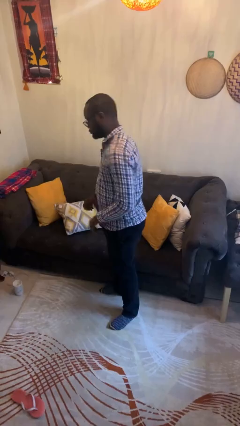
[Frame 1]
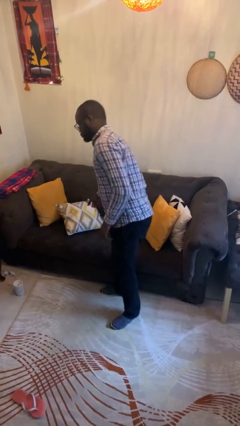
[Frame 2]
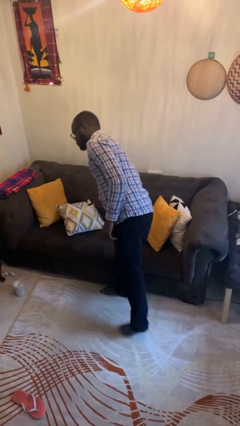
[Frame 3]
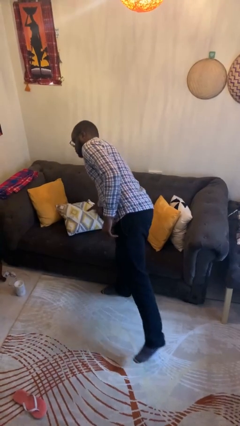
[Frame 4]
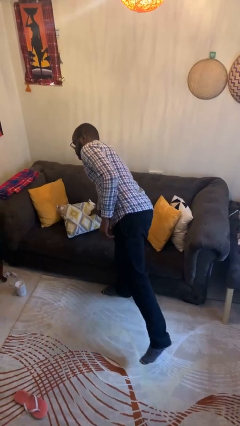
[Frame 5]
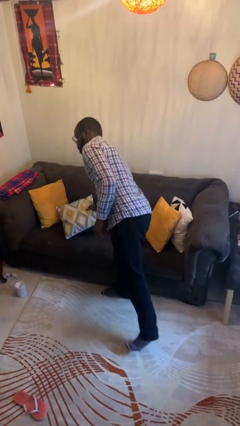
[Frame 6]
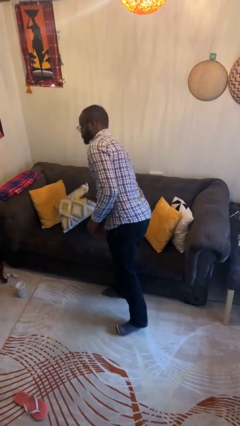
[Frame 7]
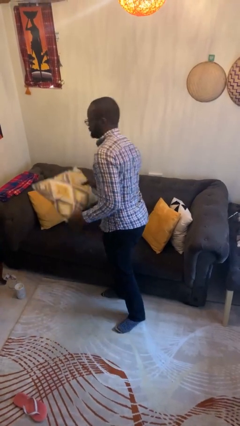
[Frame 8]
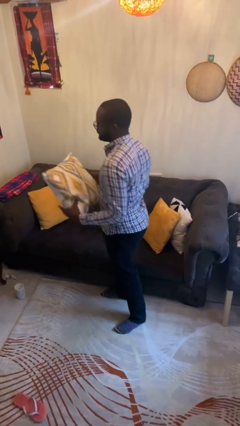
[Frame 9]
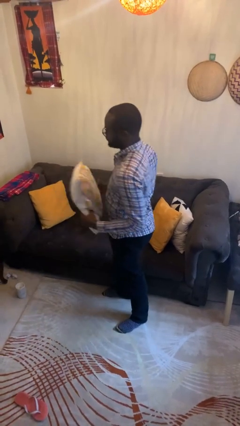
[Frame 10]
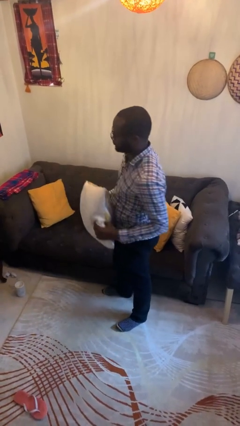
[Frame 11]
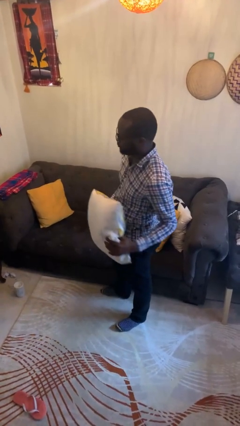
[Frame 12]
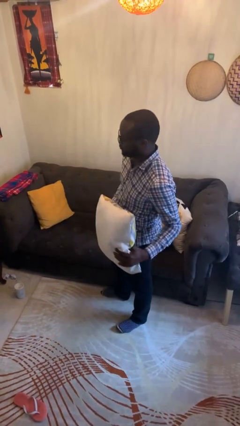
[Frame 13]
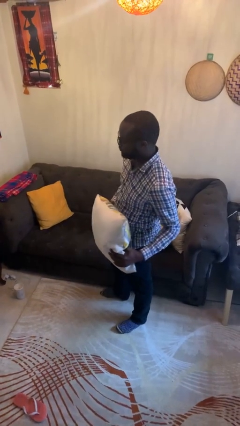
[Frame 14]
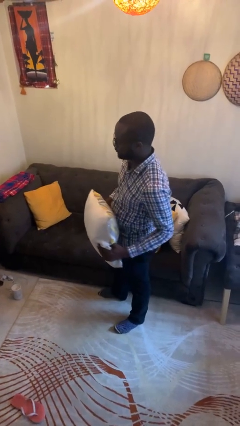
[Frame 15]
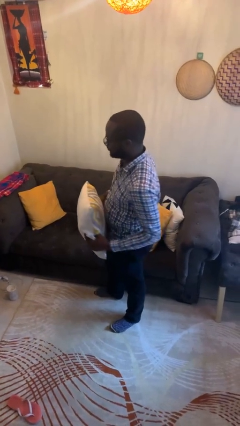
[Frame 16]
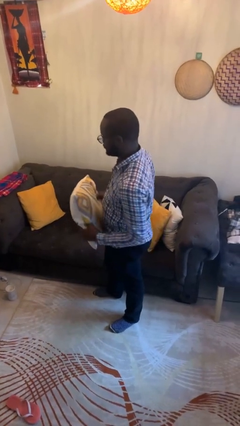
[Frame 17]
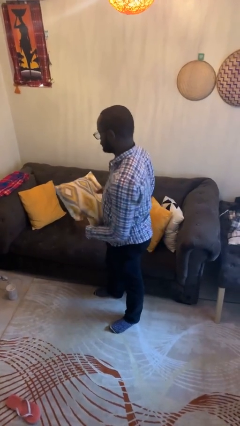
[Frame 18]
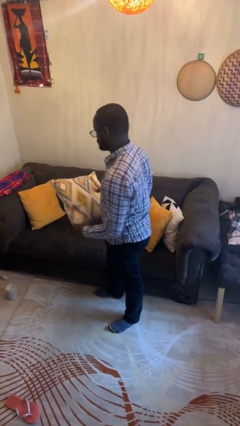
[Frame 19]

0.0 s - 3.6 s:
person picks up object from couch

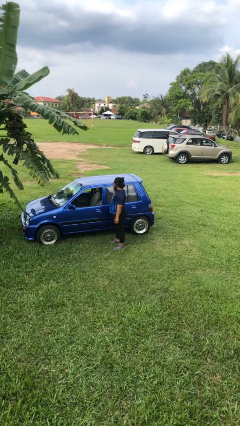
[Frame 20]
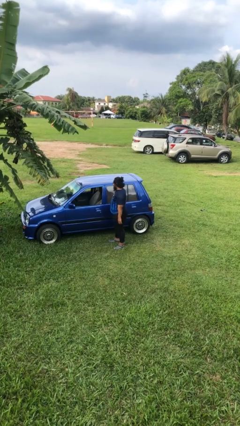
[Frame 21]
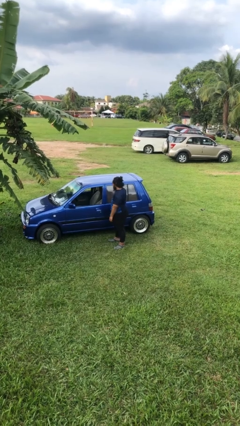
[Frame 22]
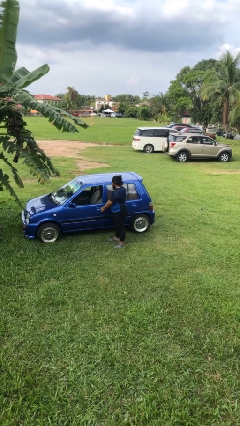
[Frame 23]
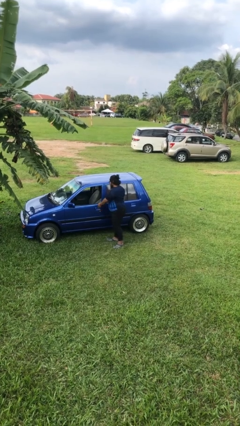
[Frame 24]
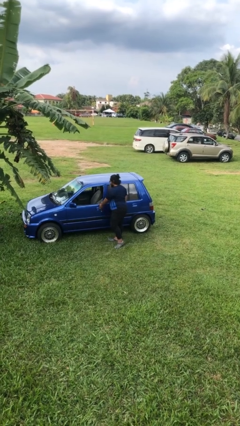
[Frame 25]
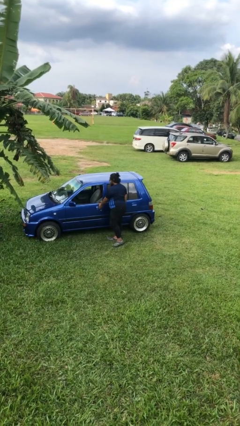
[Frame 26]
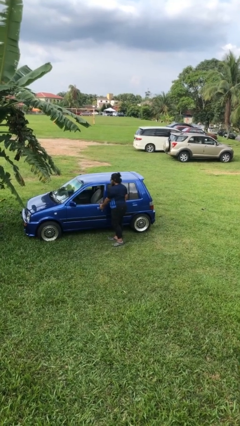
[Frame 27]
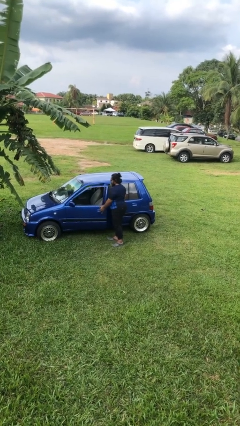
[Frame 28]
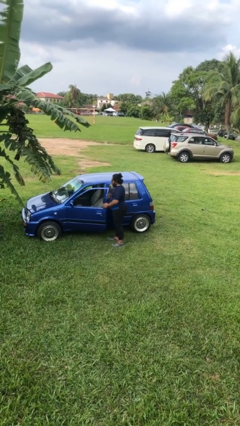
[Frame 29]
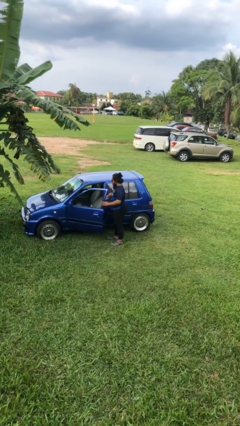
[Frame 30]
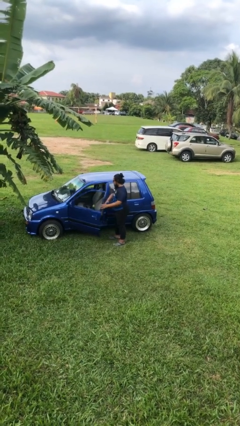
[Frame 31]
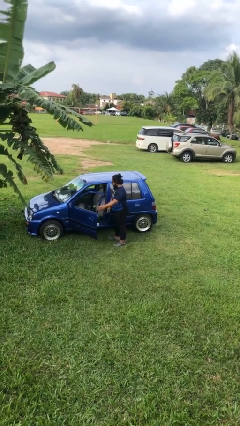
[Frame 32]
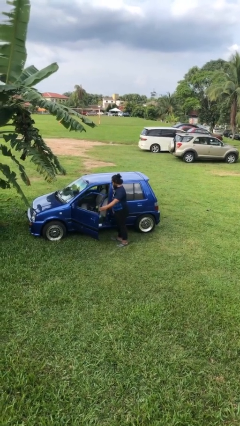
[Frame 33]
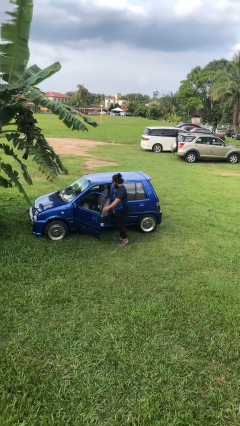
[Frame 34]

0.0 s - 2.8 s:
person opens car door

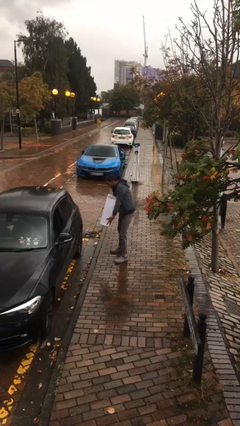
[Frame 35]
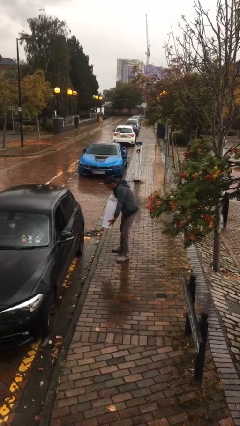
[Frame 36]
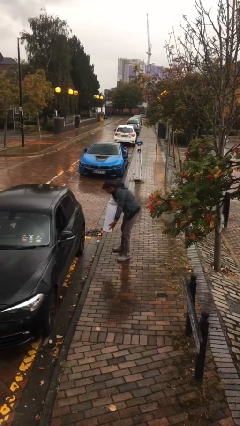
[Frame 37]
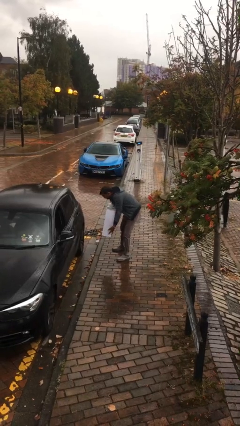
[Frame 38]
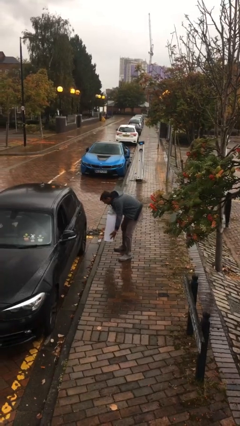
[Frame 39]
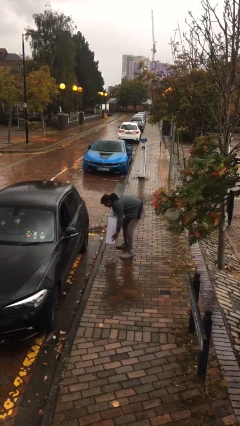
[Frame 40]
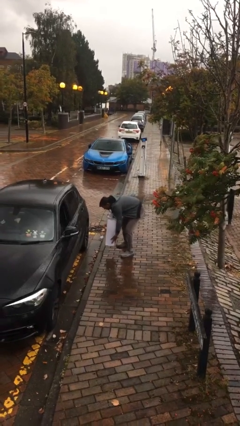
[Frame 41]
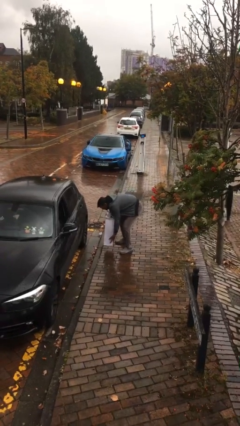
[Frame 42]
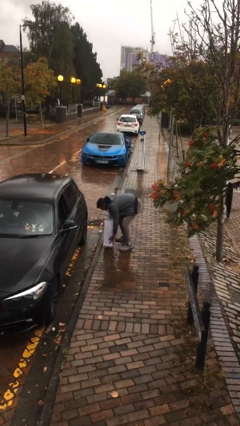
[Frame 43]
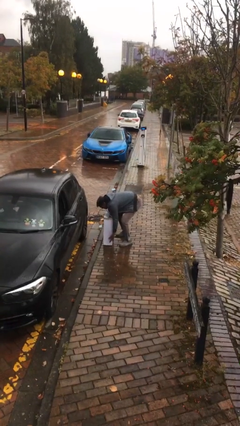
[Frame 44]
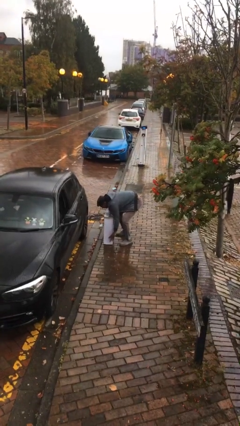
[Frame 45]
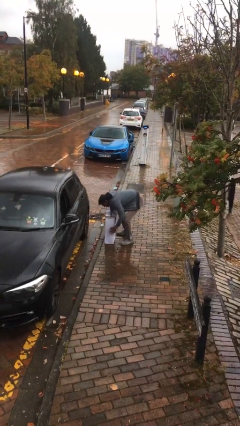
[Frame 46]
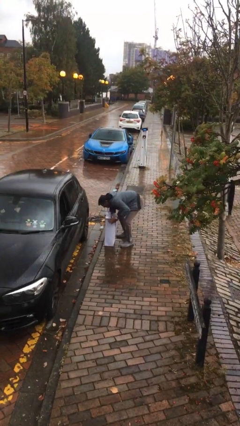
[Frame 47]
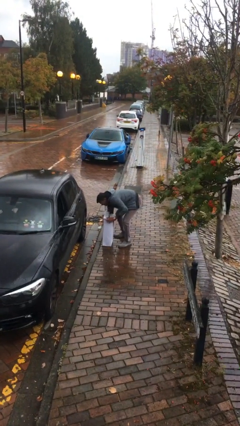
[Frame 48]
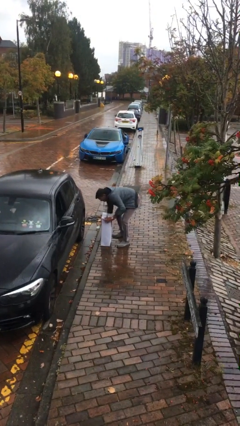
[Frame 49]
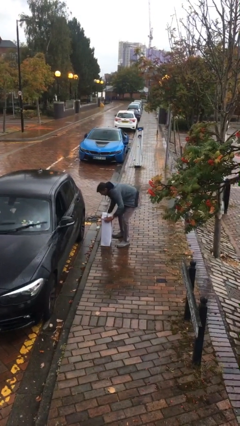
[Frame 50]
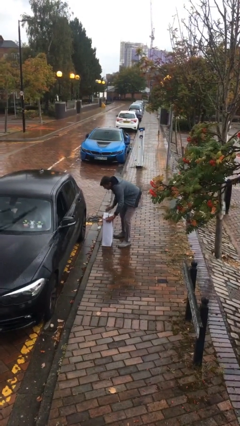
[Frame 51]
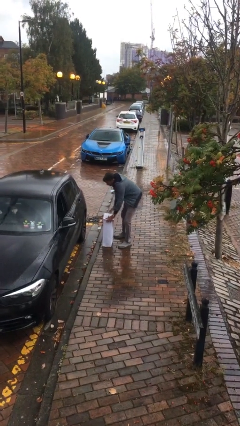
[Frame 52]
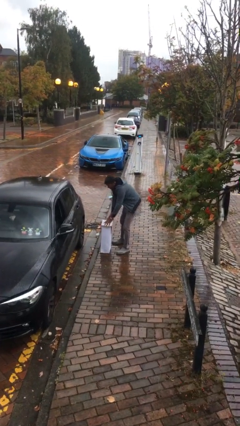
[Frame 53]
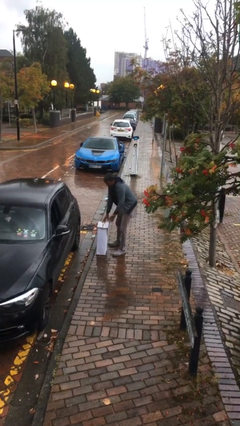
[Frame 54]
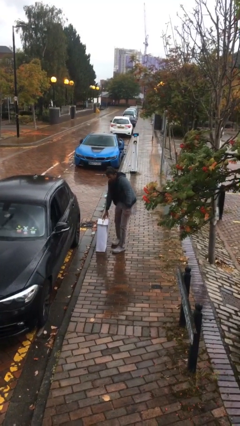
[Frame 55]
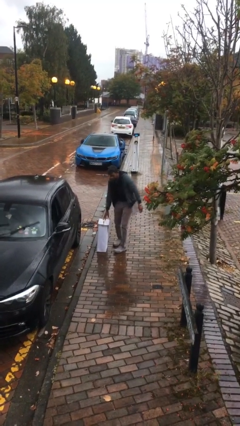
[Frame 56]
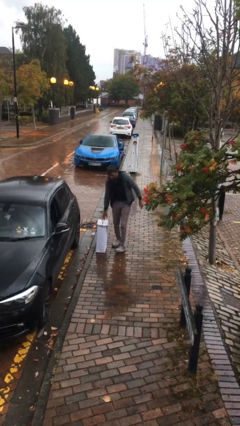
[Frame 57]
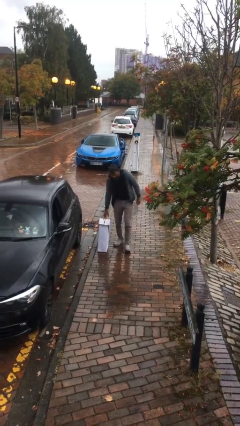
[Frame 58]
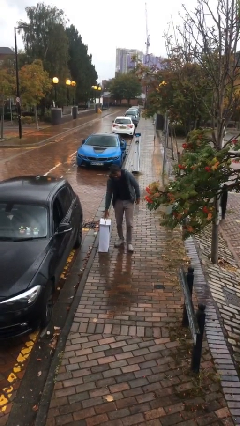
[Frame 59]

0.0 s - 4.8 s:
person puts down object on floor

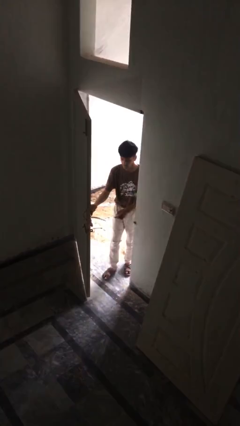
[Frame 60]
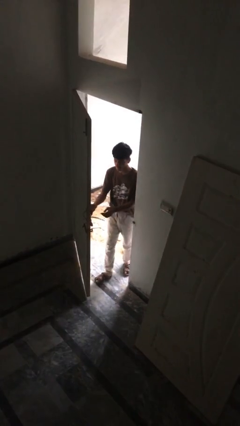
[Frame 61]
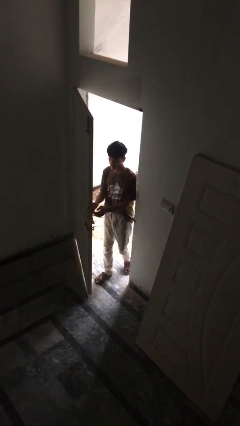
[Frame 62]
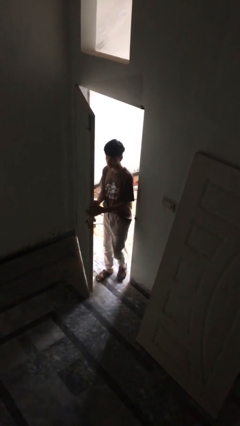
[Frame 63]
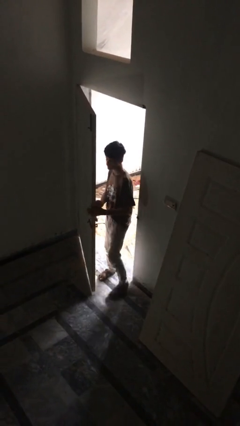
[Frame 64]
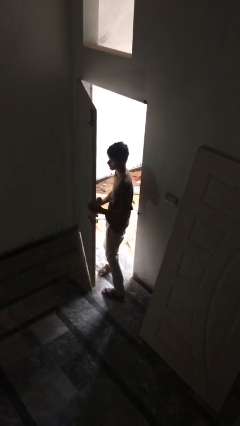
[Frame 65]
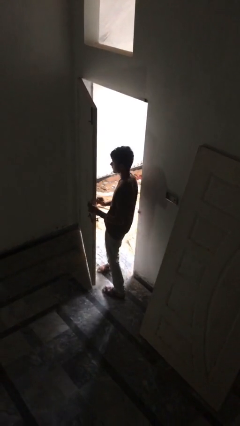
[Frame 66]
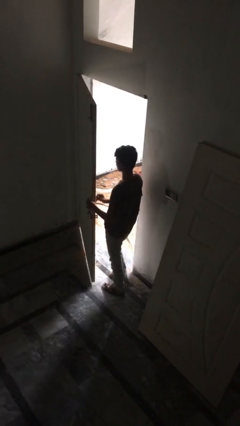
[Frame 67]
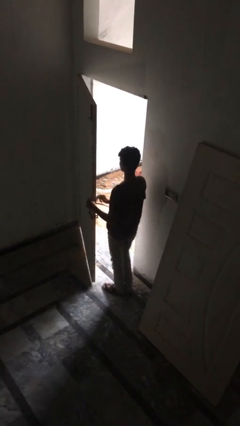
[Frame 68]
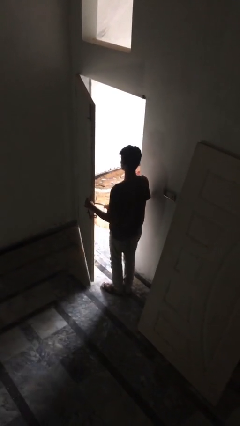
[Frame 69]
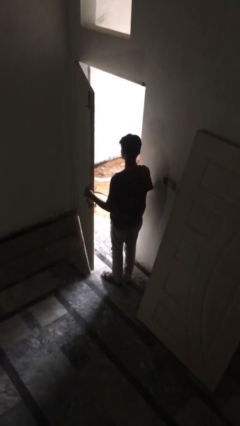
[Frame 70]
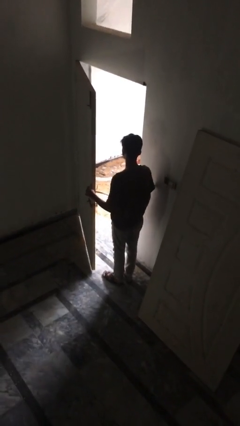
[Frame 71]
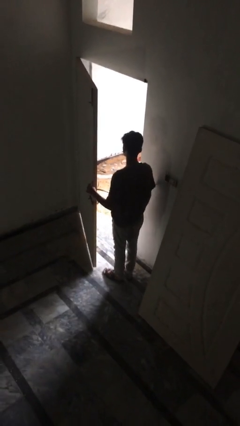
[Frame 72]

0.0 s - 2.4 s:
person enters scene through structure

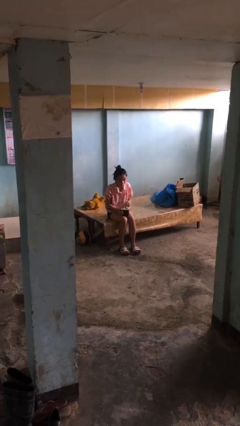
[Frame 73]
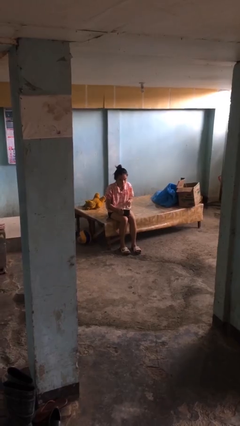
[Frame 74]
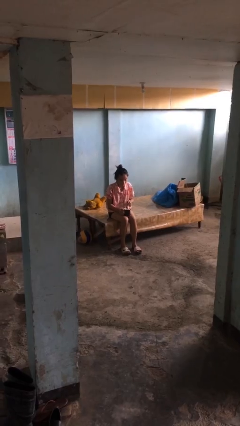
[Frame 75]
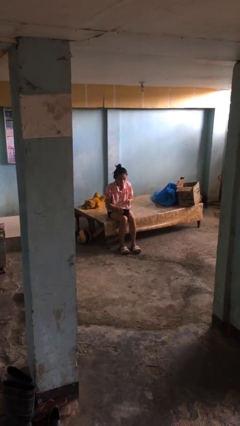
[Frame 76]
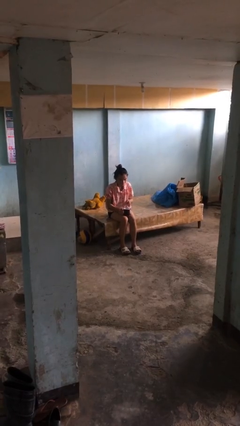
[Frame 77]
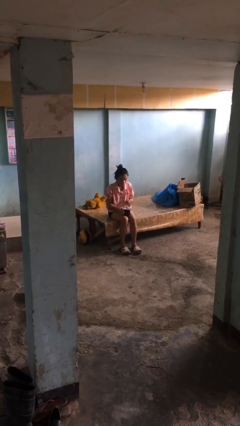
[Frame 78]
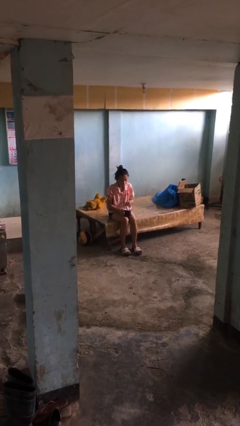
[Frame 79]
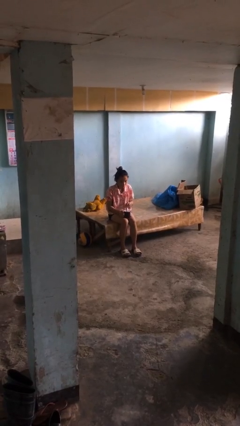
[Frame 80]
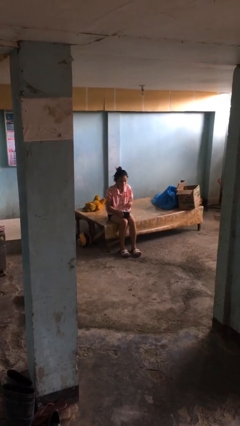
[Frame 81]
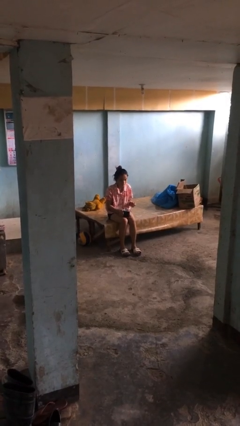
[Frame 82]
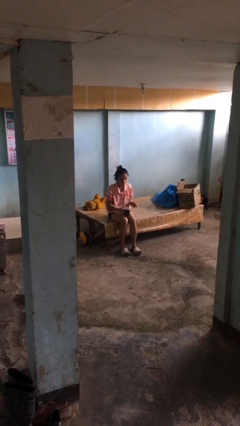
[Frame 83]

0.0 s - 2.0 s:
person stirs mug

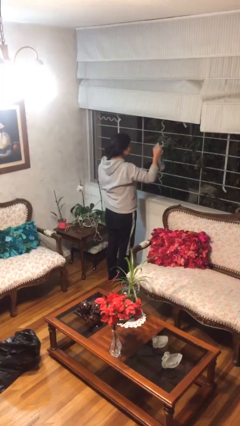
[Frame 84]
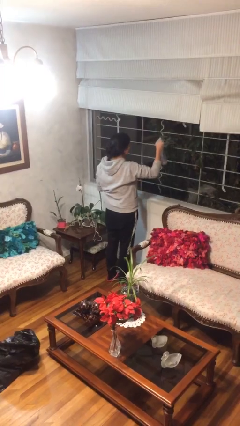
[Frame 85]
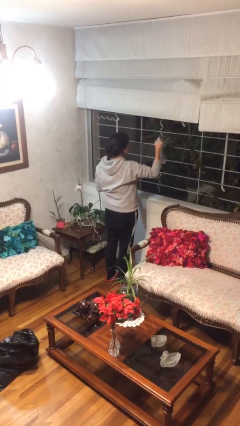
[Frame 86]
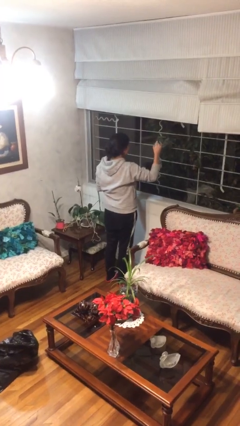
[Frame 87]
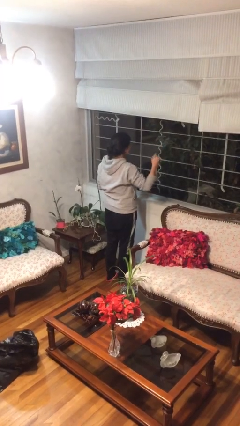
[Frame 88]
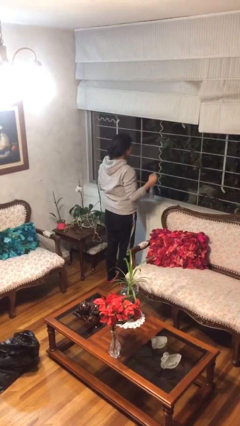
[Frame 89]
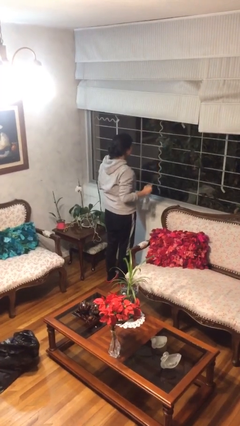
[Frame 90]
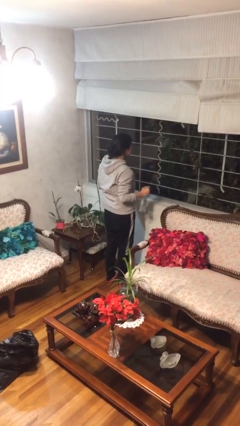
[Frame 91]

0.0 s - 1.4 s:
person sprays from bottle
